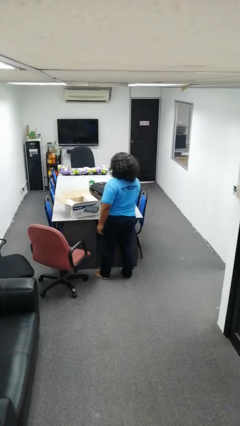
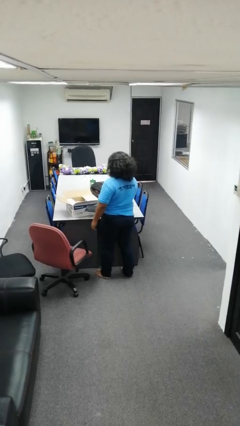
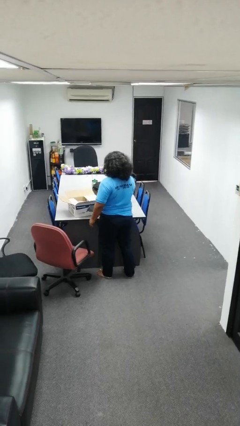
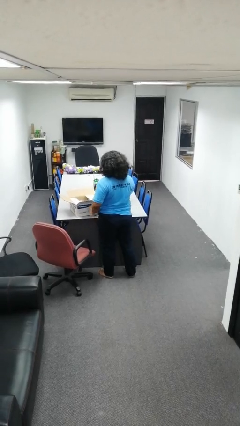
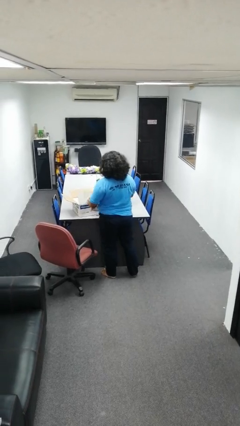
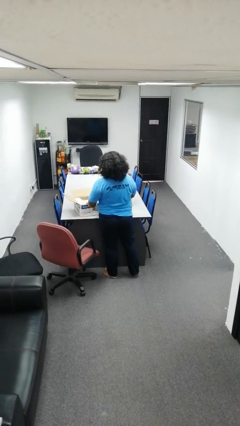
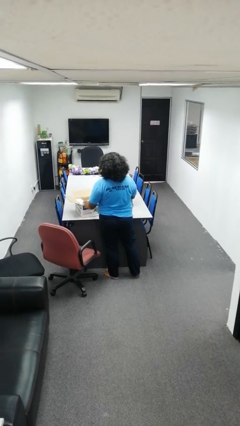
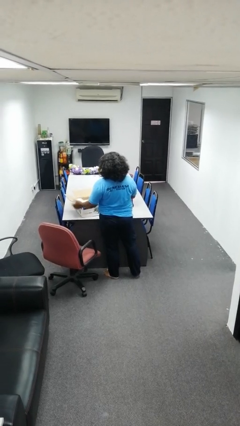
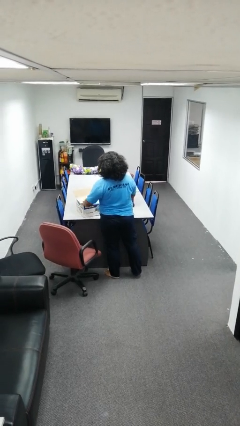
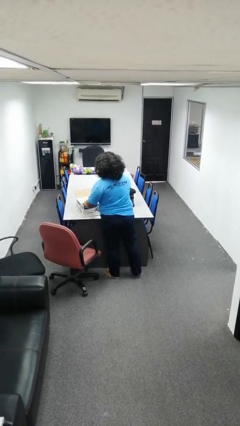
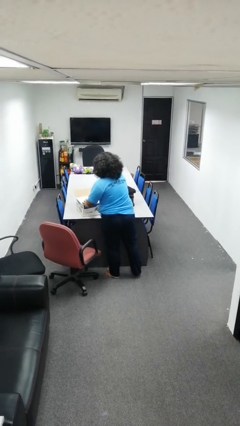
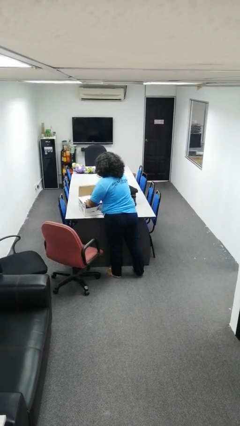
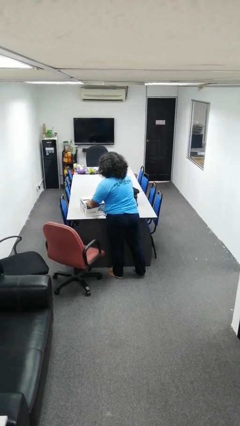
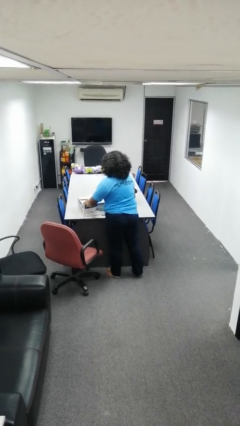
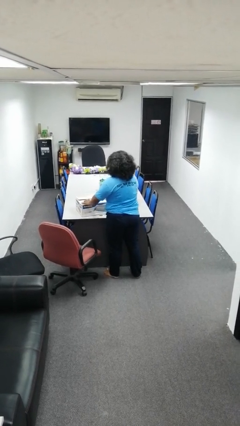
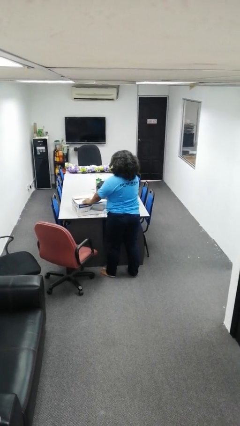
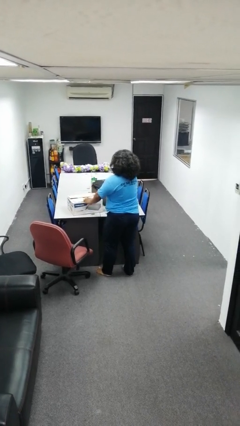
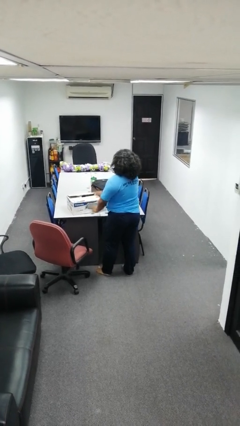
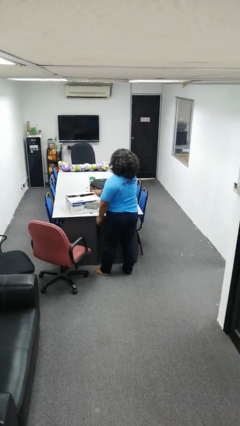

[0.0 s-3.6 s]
person closes box

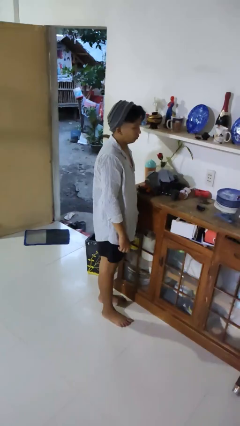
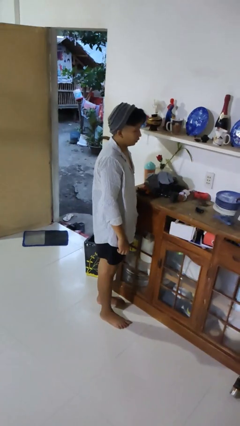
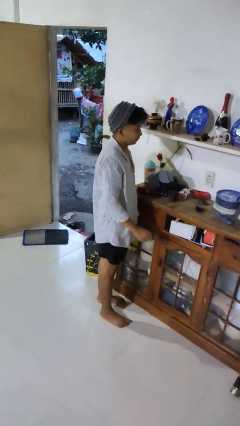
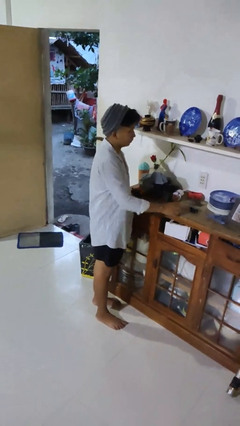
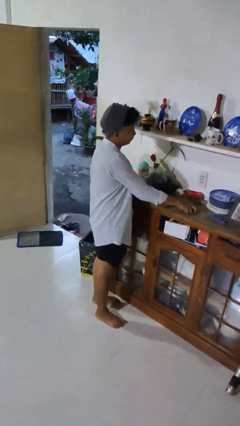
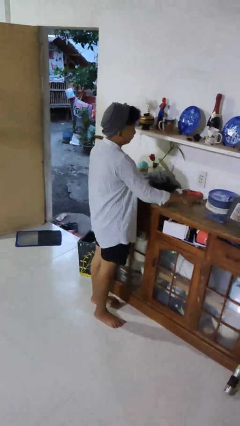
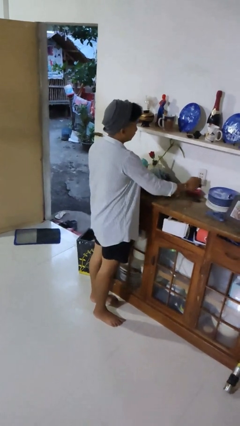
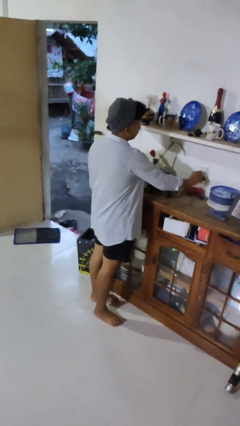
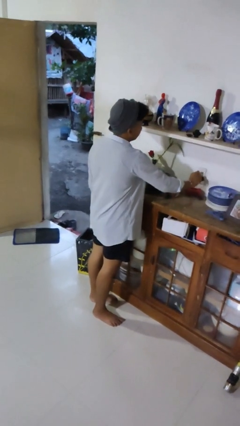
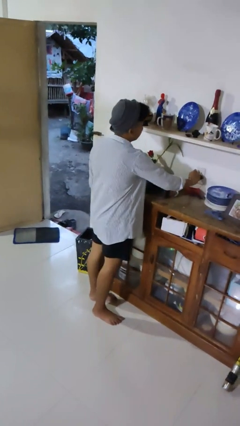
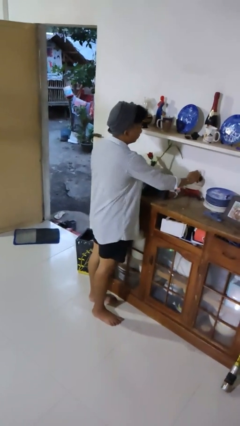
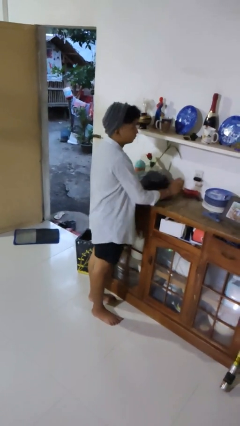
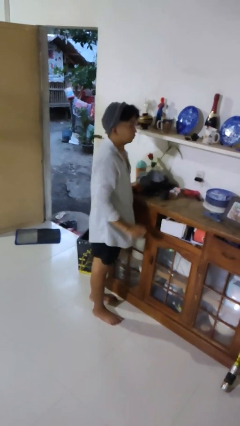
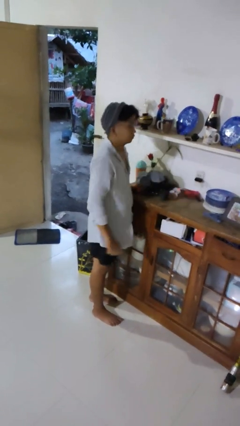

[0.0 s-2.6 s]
person plugs into electrical socket

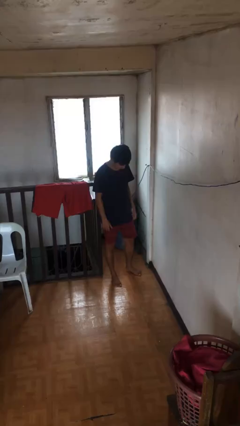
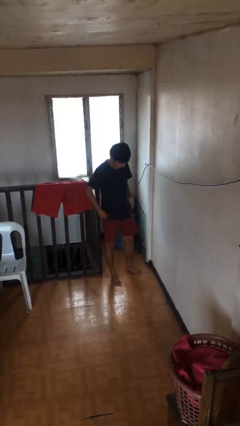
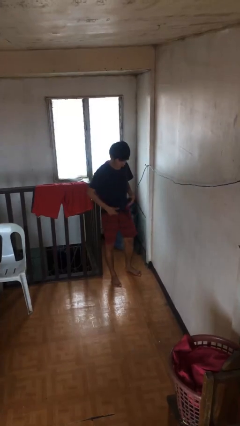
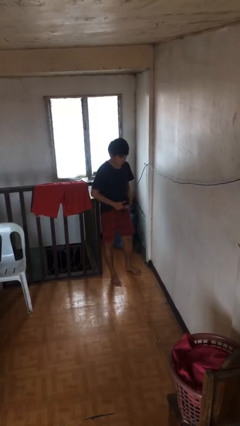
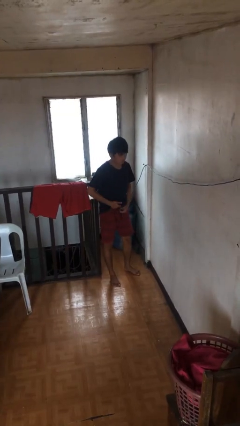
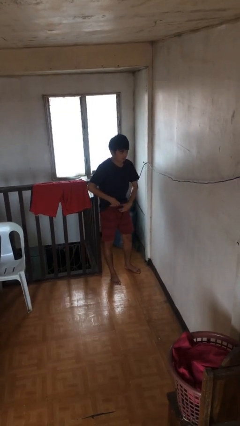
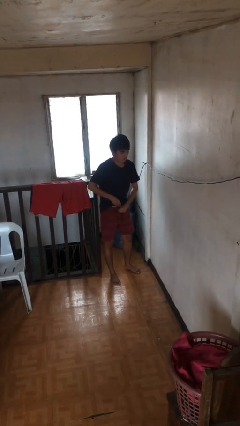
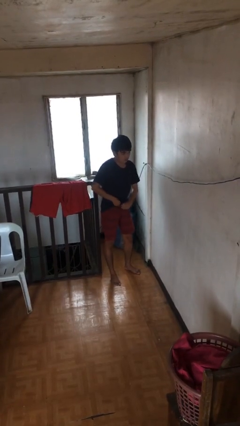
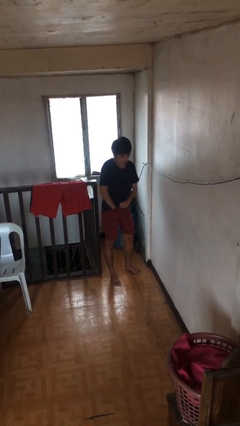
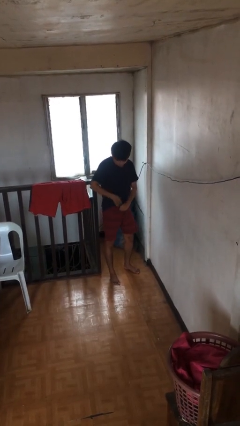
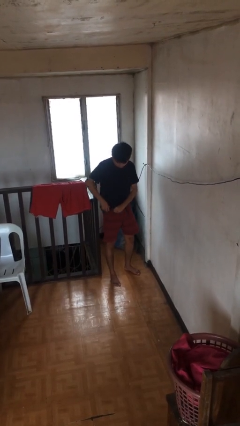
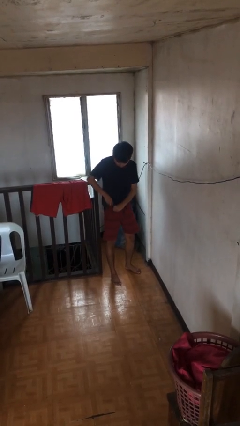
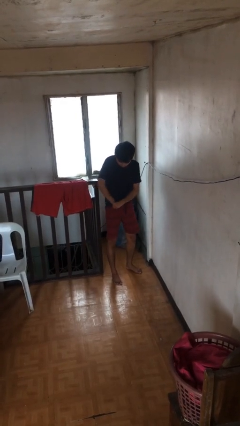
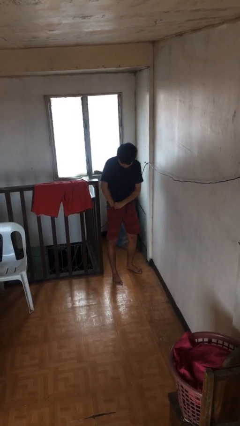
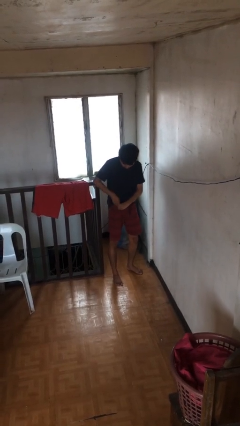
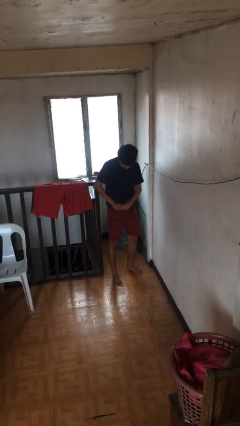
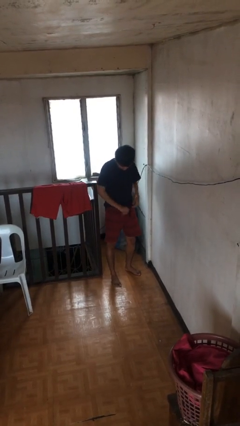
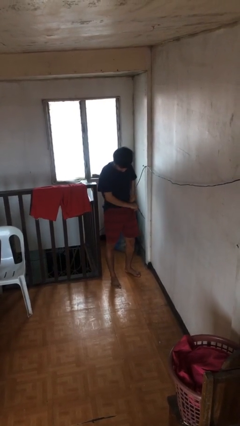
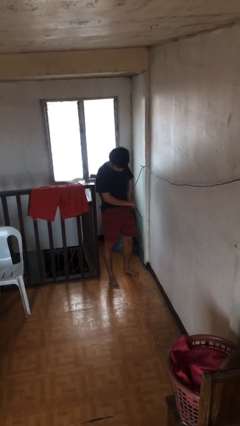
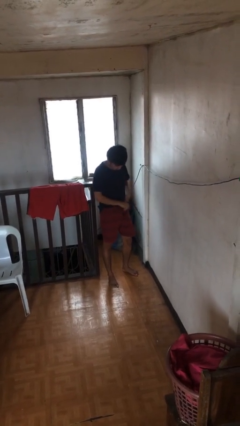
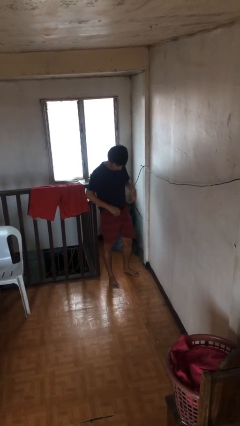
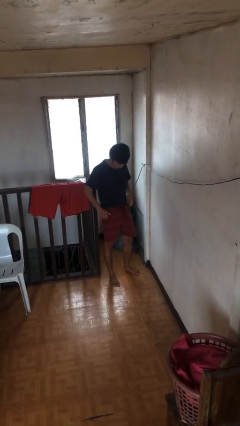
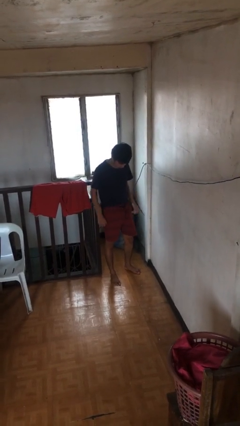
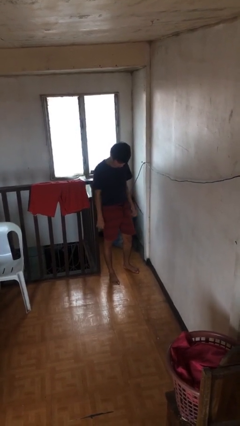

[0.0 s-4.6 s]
person tucks in shirt

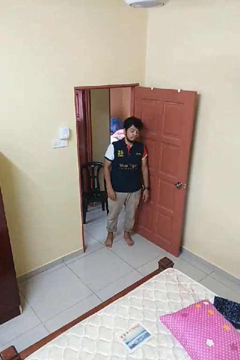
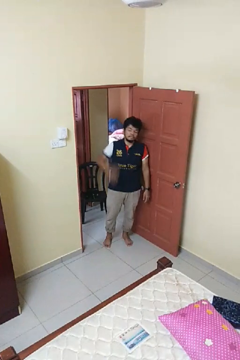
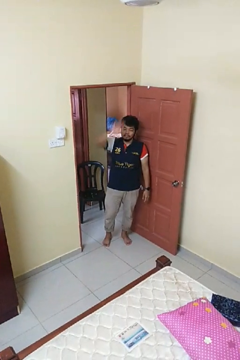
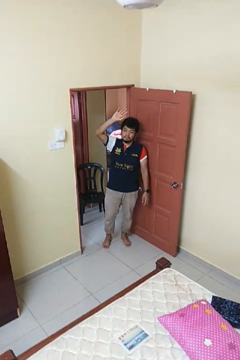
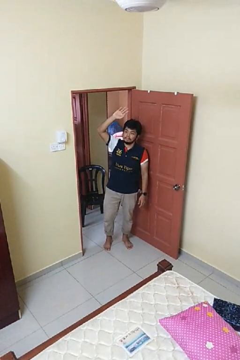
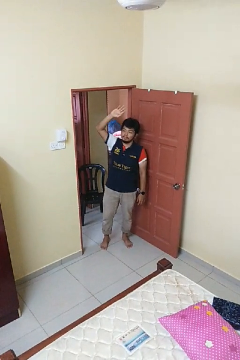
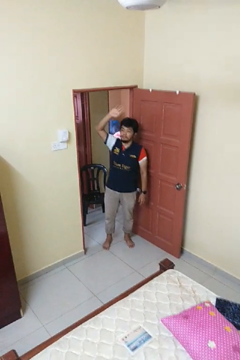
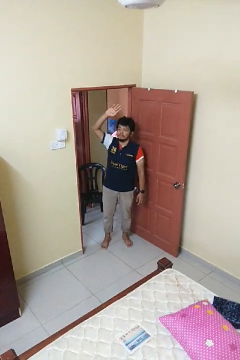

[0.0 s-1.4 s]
person gestures raise hand

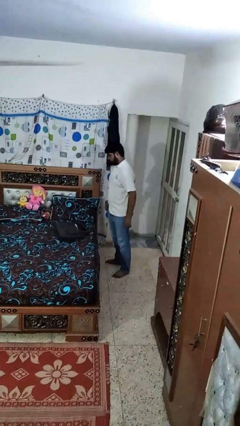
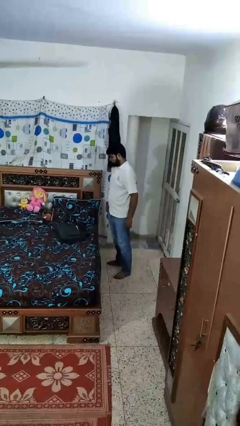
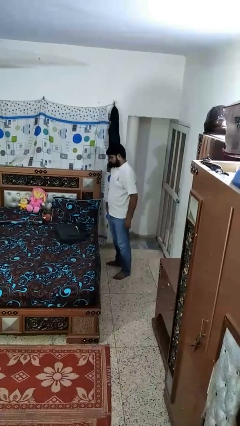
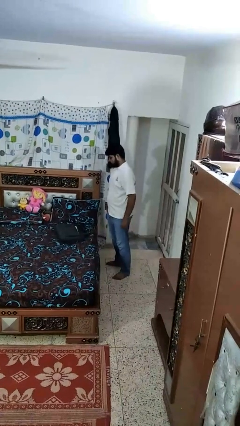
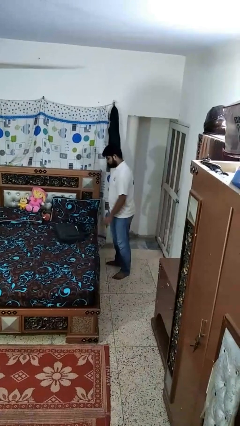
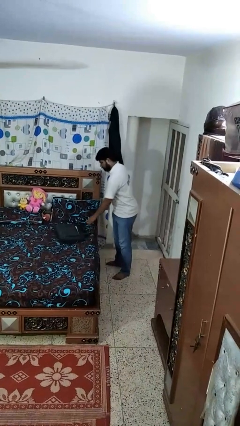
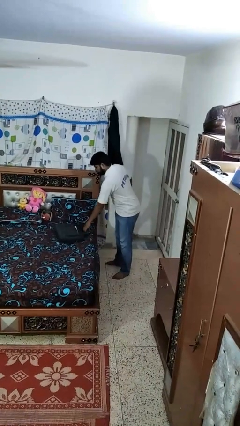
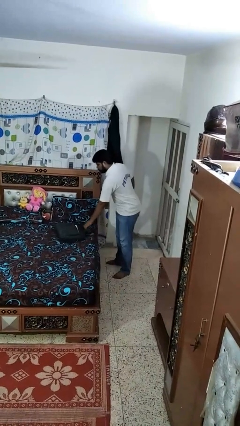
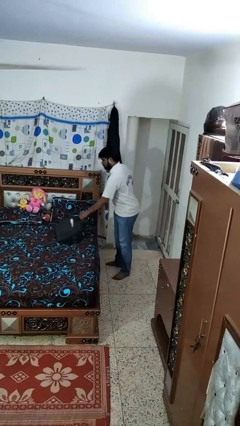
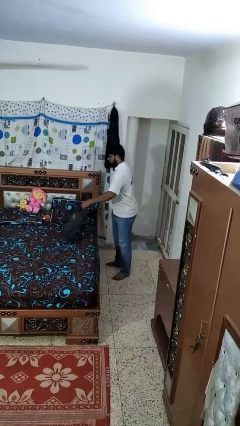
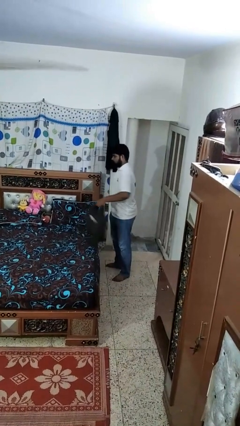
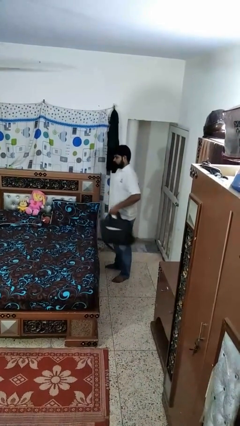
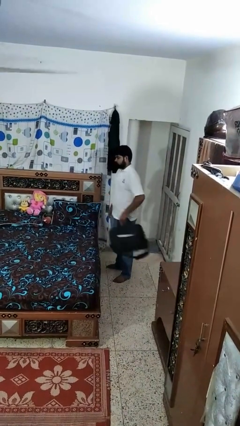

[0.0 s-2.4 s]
person picks up object from bed

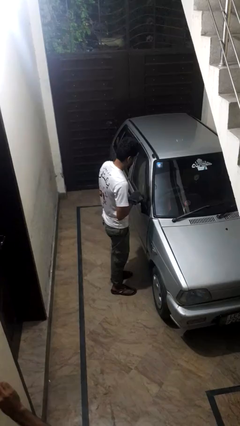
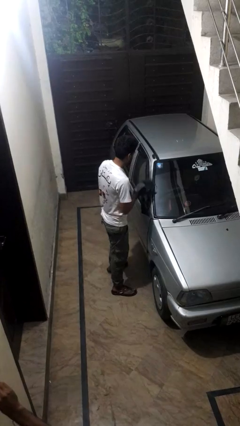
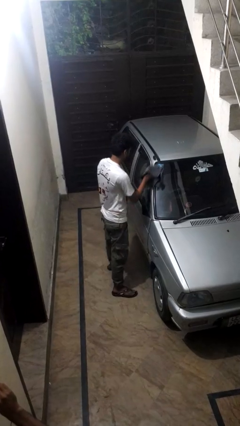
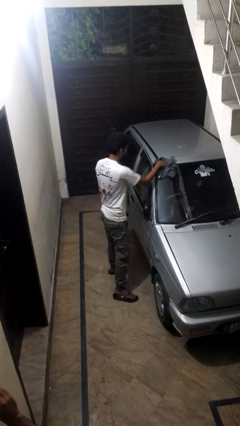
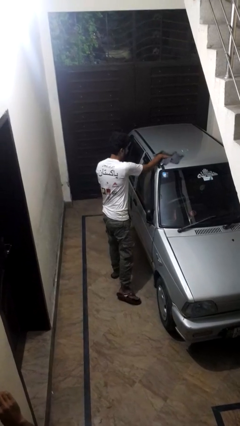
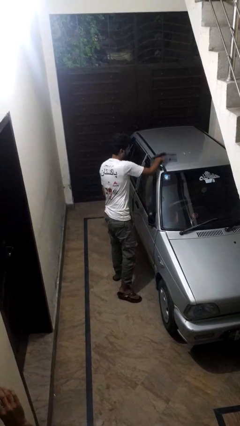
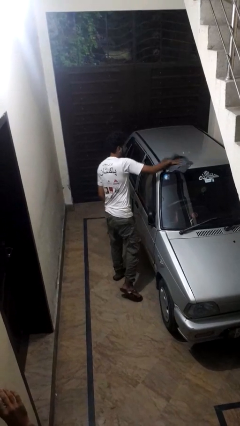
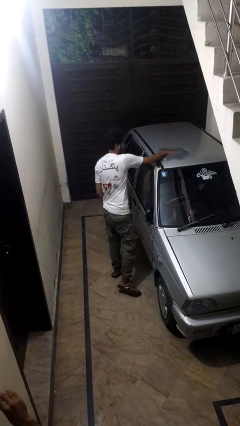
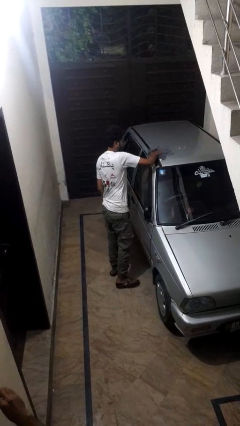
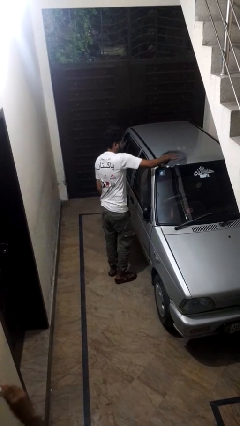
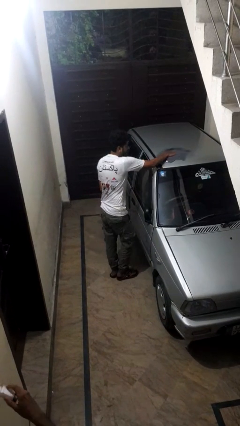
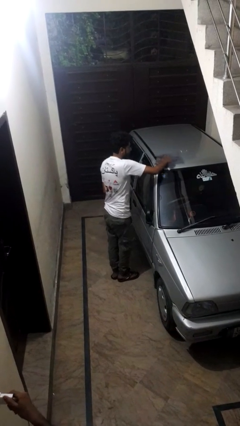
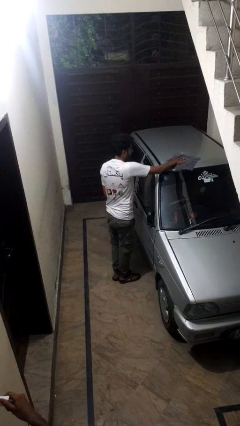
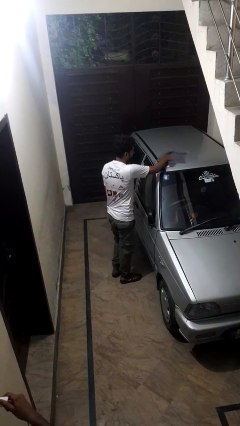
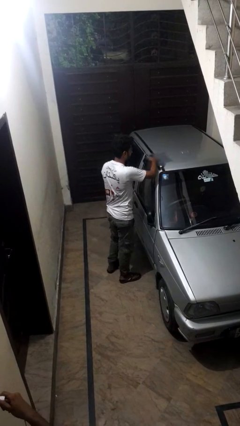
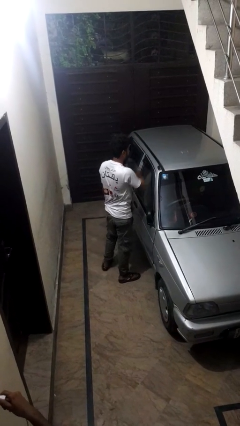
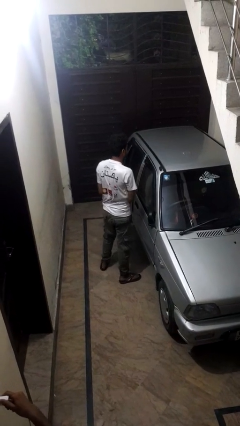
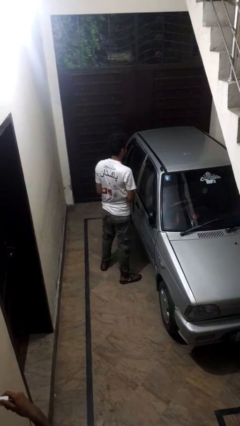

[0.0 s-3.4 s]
person polishes car with rag
